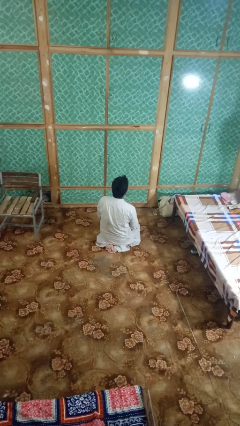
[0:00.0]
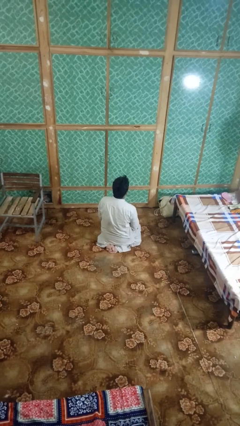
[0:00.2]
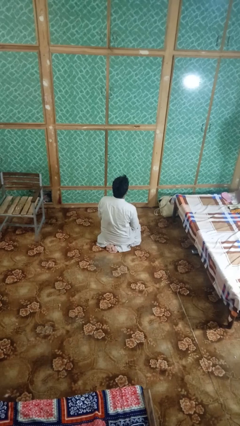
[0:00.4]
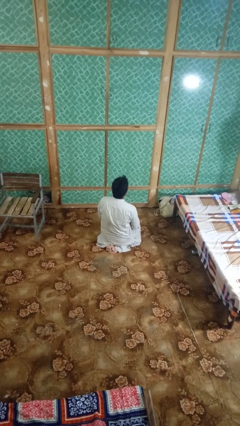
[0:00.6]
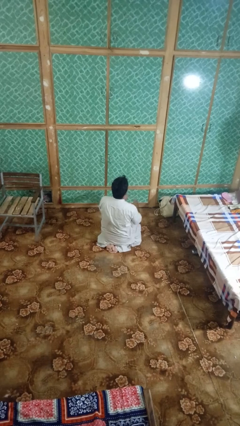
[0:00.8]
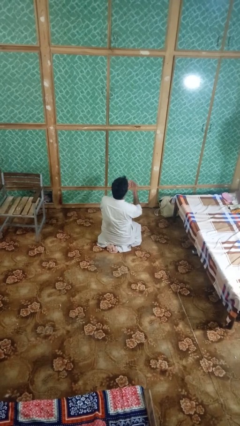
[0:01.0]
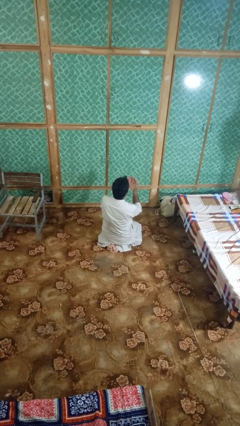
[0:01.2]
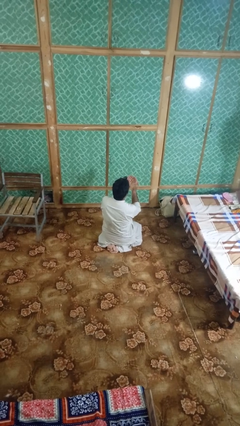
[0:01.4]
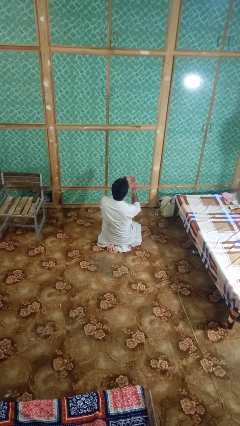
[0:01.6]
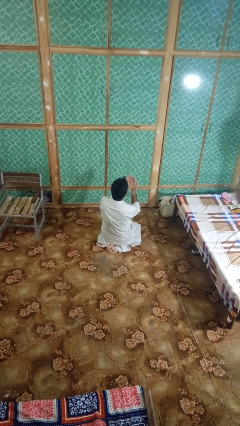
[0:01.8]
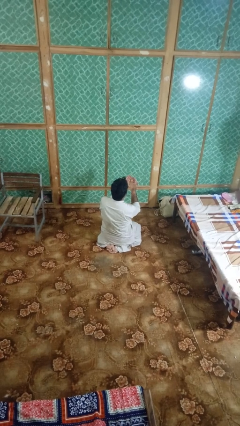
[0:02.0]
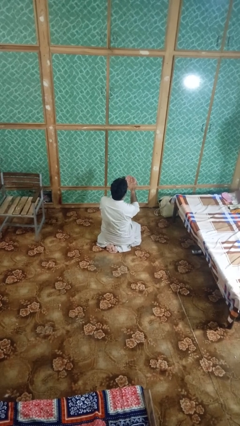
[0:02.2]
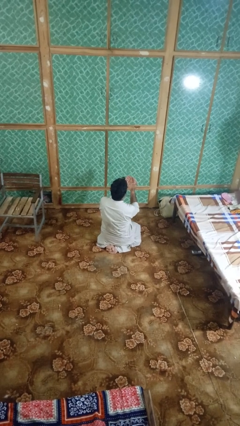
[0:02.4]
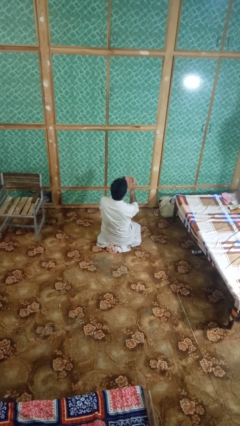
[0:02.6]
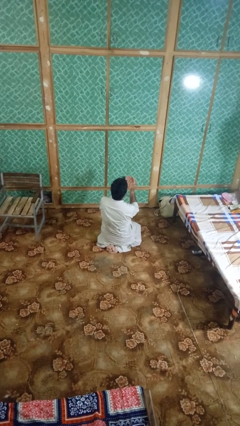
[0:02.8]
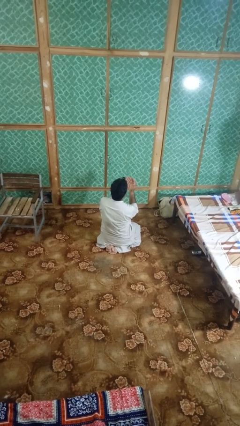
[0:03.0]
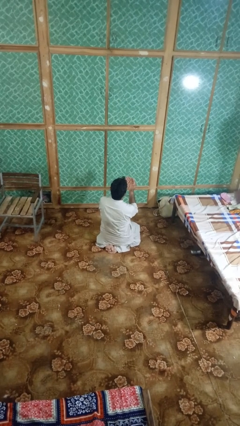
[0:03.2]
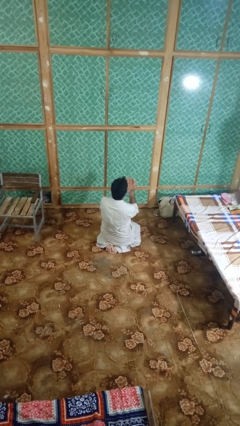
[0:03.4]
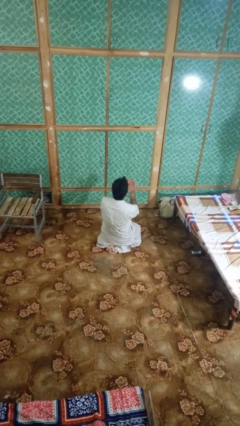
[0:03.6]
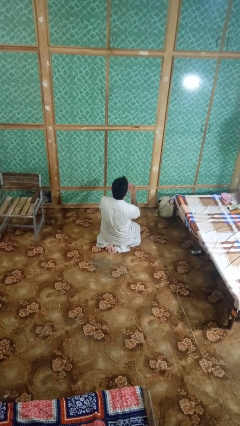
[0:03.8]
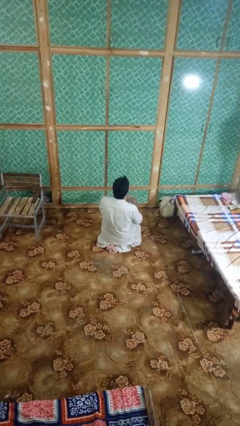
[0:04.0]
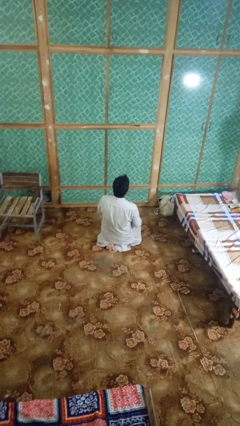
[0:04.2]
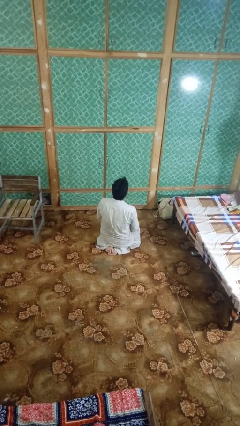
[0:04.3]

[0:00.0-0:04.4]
person prays

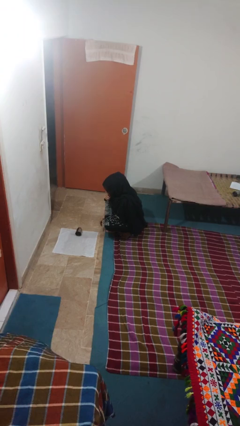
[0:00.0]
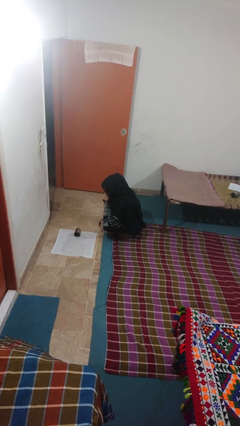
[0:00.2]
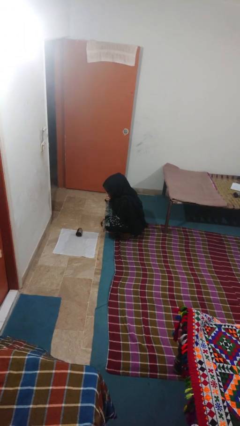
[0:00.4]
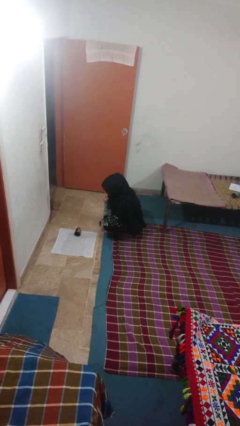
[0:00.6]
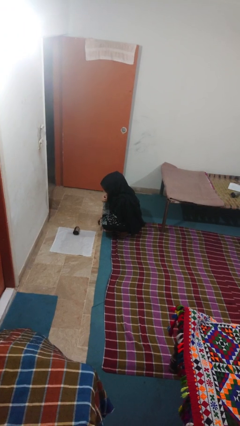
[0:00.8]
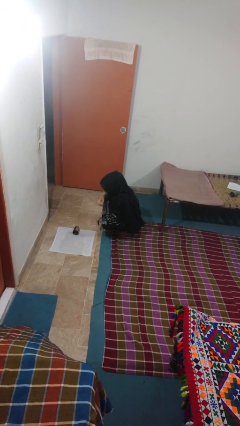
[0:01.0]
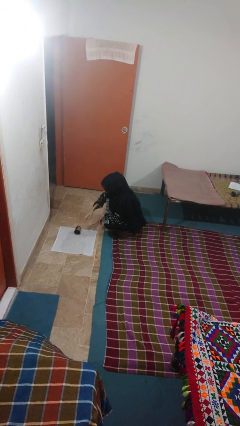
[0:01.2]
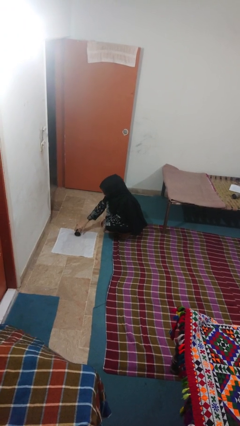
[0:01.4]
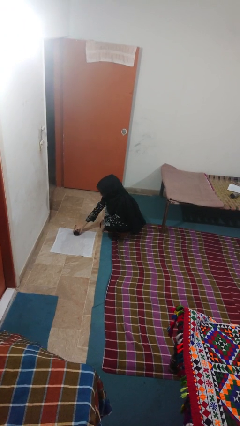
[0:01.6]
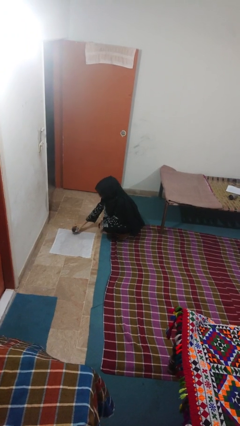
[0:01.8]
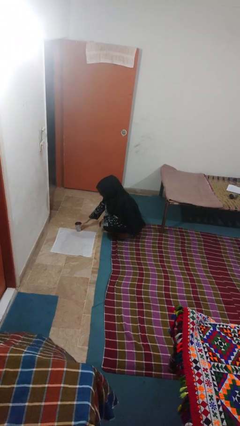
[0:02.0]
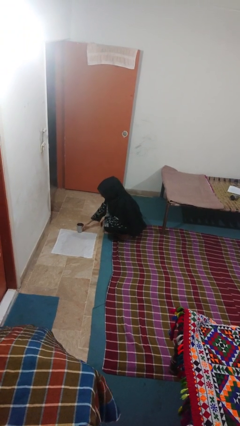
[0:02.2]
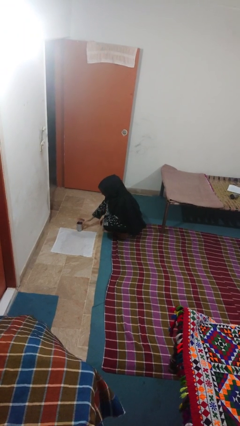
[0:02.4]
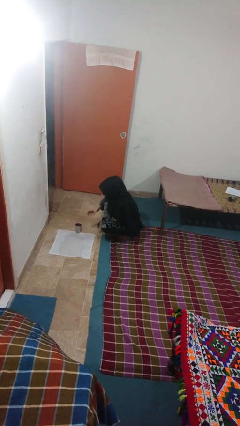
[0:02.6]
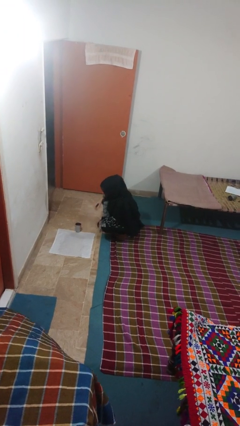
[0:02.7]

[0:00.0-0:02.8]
person sets upright glass

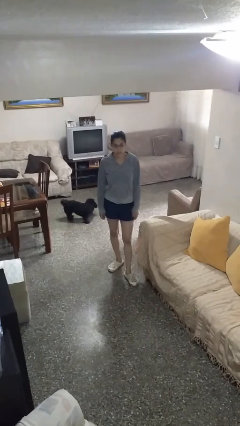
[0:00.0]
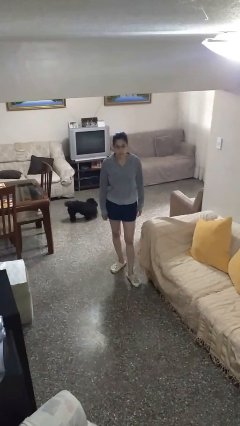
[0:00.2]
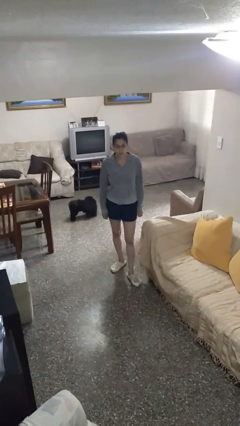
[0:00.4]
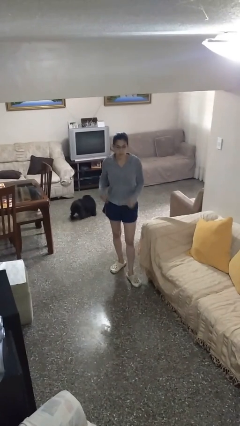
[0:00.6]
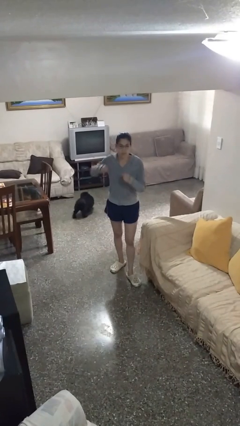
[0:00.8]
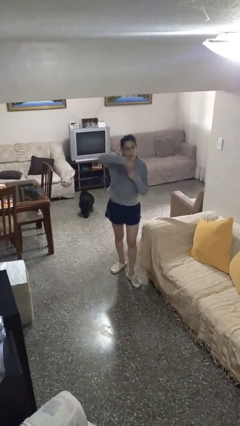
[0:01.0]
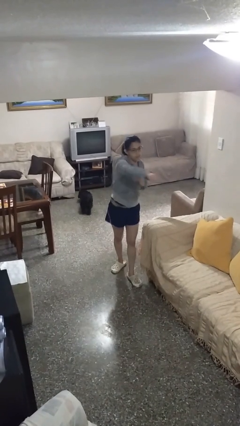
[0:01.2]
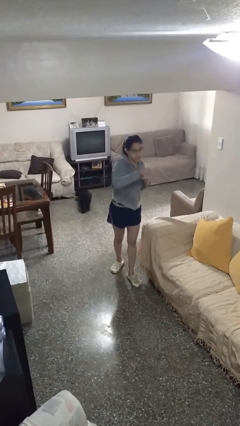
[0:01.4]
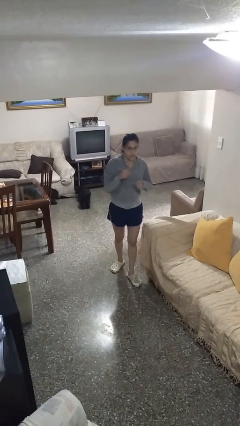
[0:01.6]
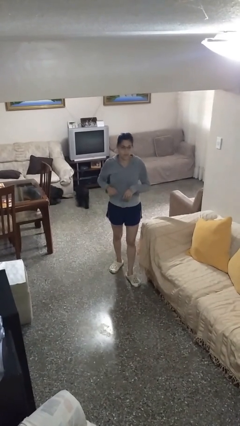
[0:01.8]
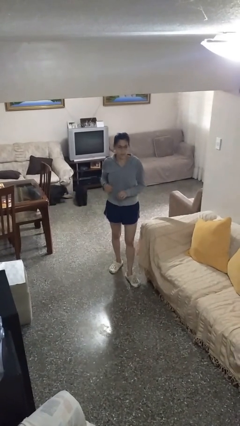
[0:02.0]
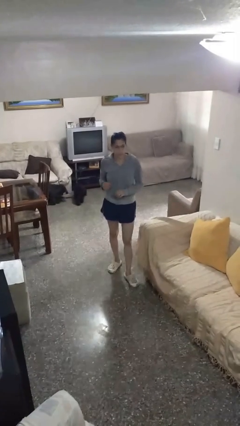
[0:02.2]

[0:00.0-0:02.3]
person punches

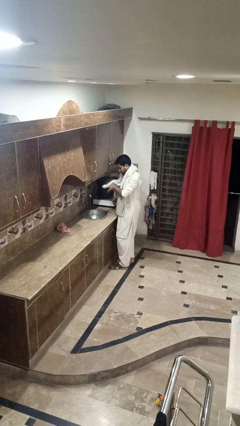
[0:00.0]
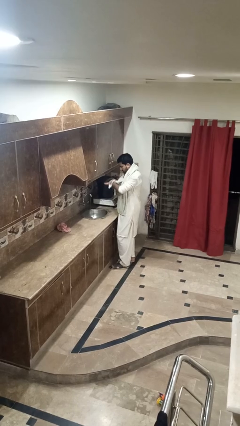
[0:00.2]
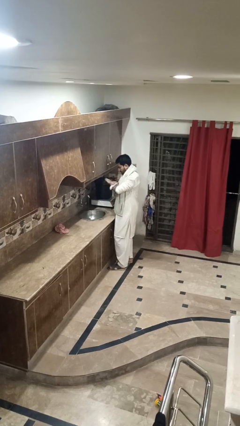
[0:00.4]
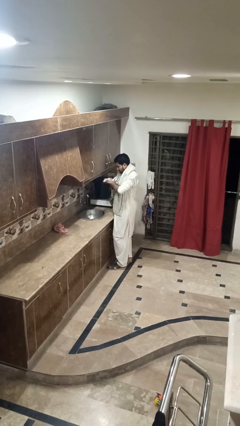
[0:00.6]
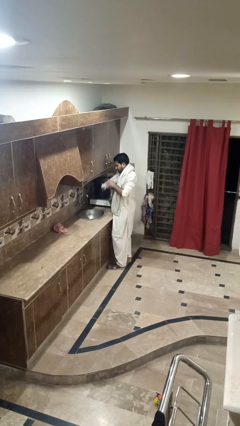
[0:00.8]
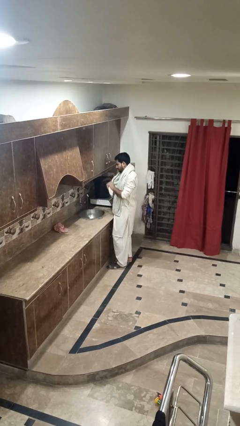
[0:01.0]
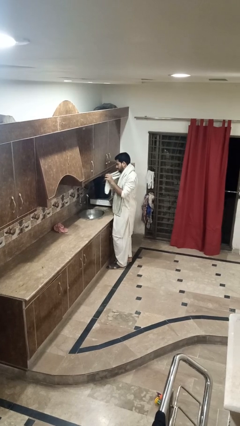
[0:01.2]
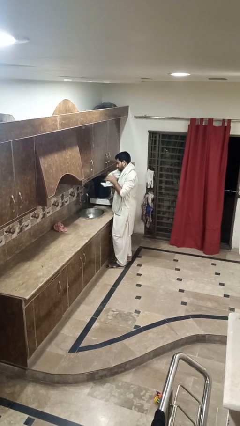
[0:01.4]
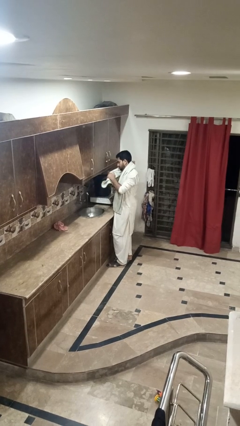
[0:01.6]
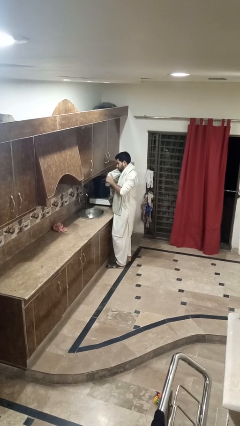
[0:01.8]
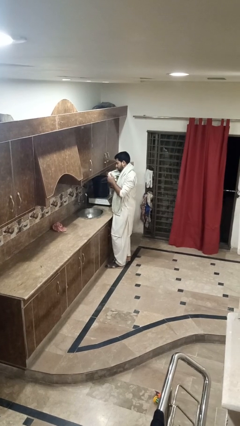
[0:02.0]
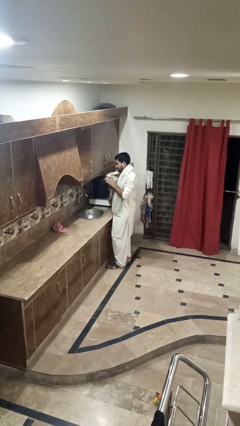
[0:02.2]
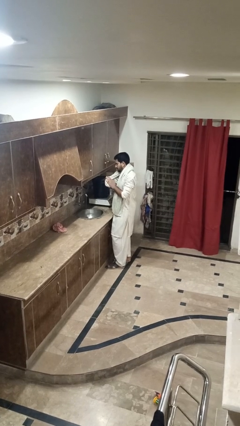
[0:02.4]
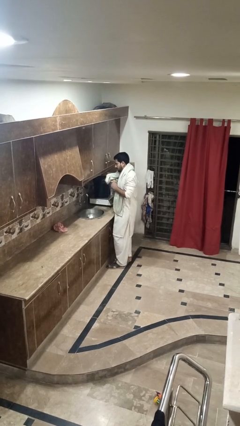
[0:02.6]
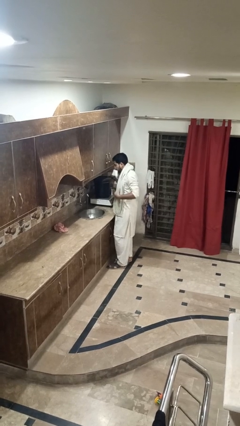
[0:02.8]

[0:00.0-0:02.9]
person dries hands with towel

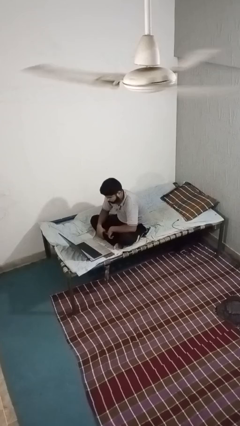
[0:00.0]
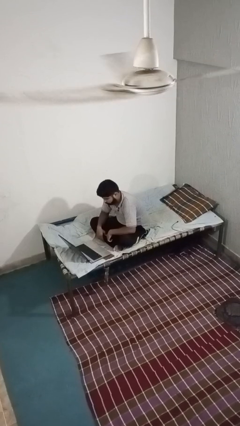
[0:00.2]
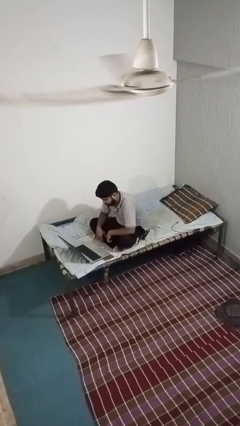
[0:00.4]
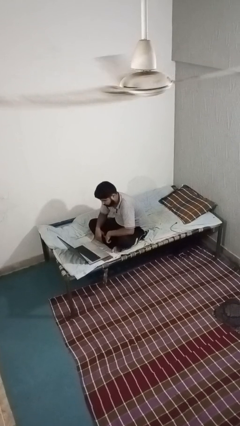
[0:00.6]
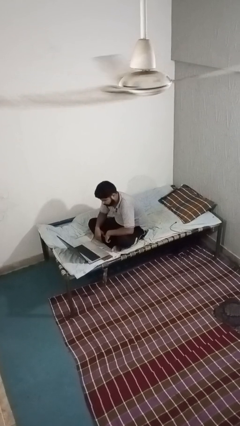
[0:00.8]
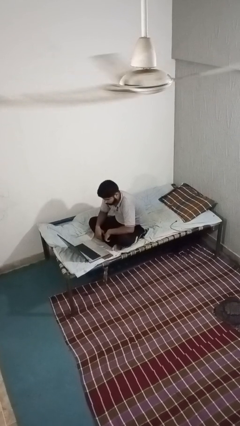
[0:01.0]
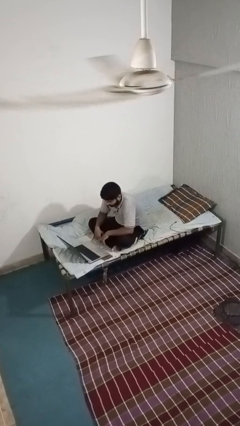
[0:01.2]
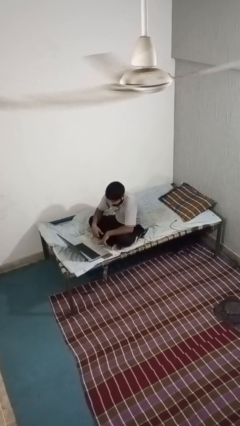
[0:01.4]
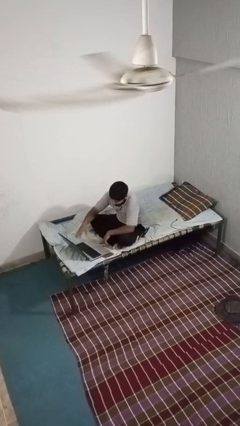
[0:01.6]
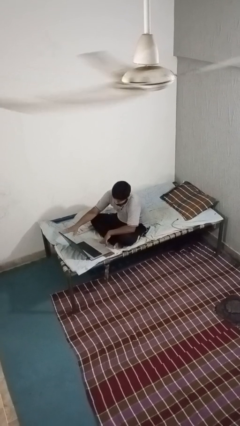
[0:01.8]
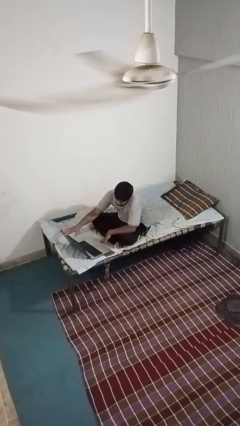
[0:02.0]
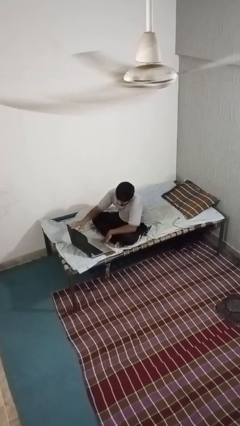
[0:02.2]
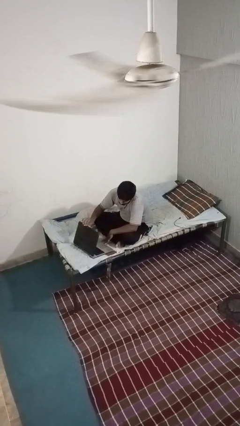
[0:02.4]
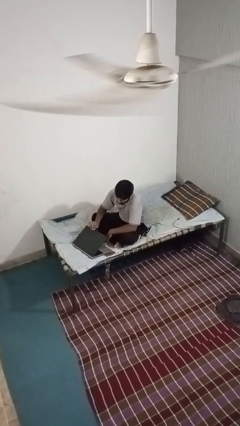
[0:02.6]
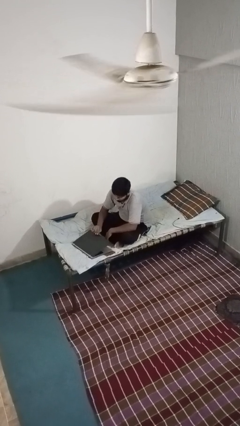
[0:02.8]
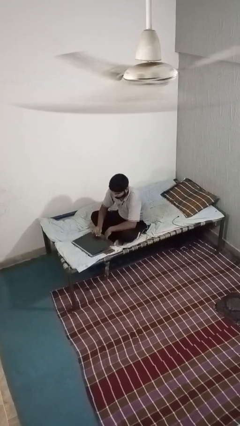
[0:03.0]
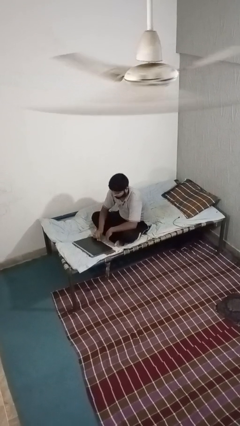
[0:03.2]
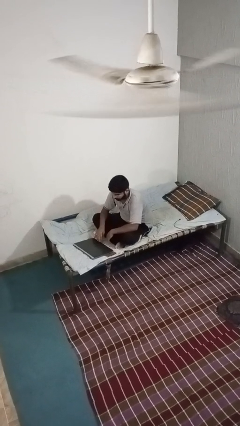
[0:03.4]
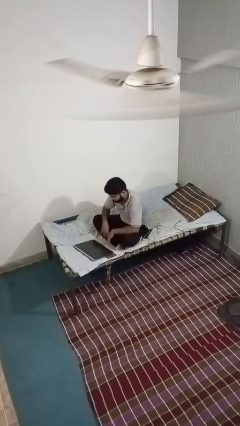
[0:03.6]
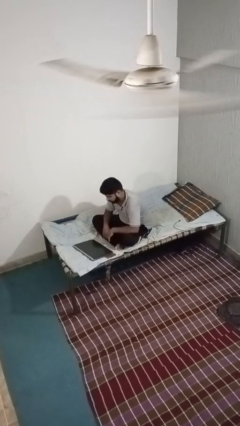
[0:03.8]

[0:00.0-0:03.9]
person closes laptop

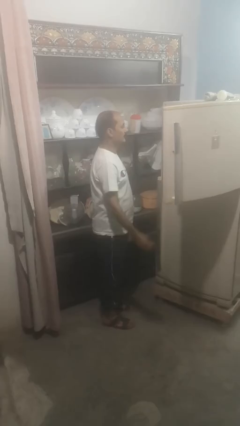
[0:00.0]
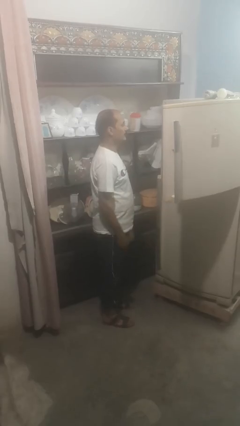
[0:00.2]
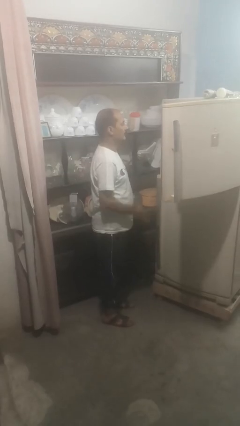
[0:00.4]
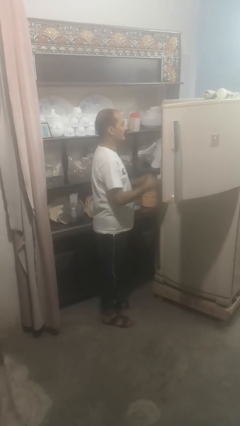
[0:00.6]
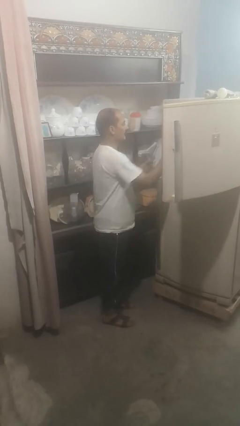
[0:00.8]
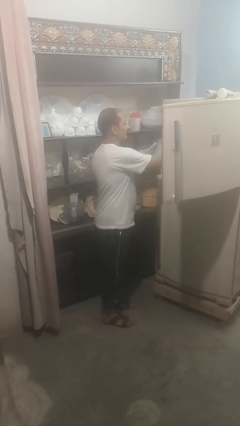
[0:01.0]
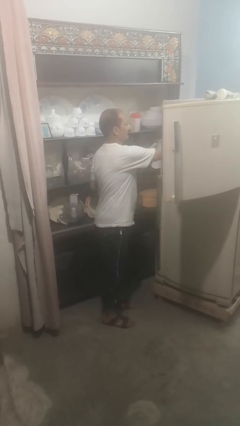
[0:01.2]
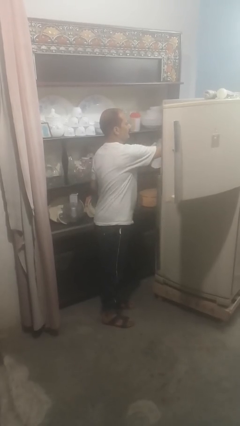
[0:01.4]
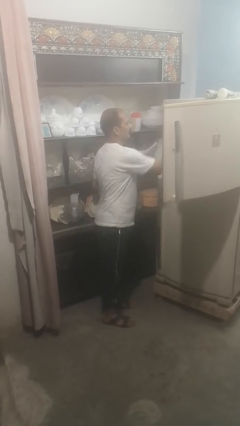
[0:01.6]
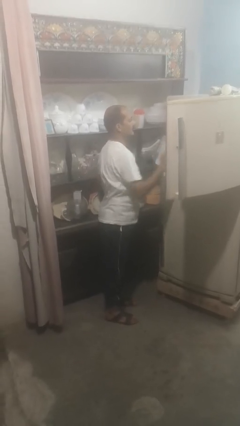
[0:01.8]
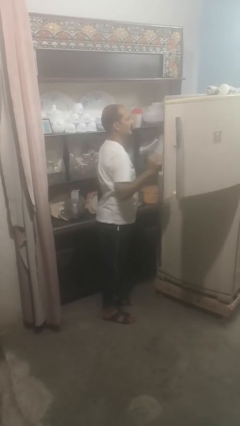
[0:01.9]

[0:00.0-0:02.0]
person puts object into refrigerator
